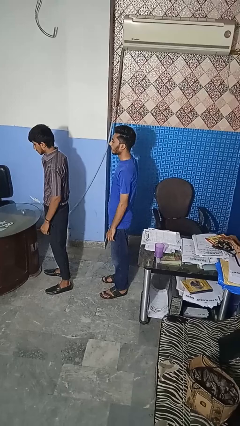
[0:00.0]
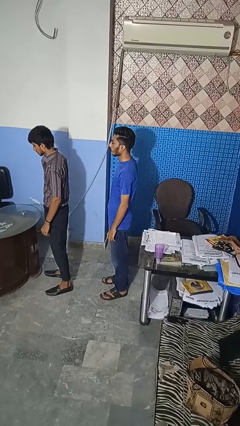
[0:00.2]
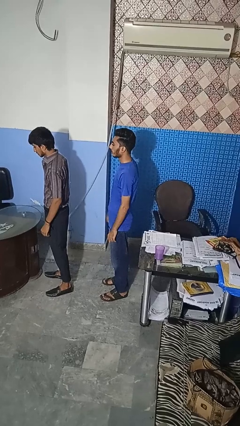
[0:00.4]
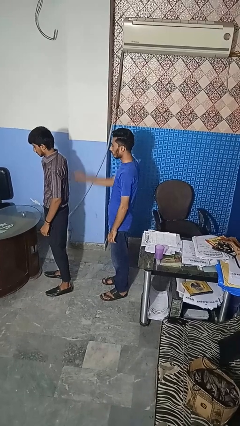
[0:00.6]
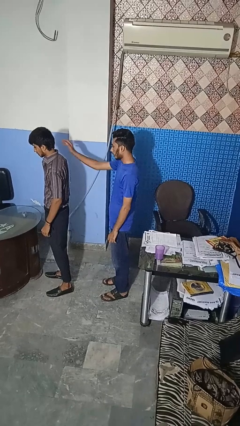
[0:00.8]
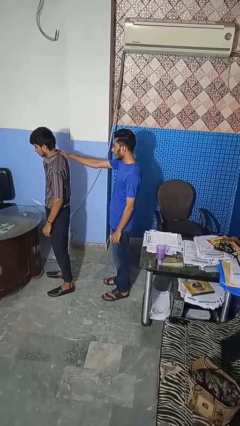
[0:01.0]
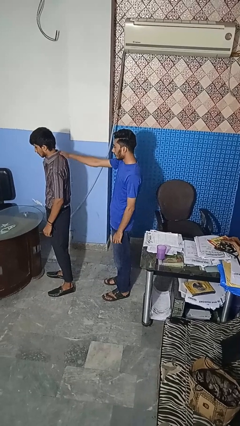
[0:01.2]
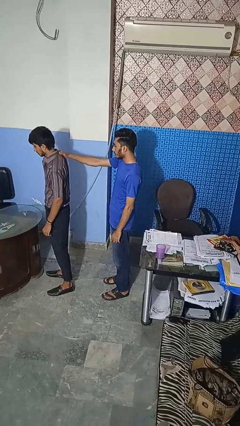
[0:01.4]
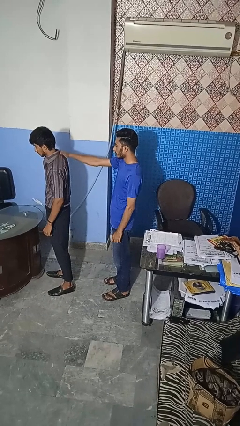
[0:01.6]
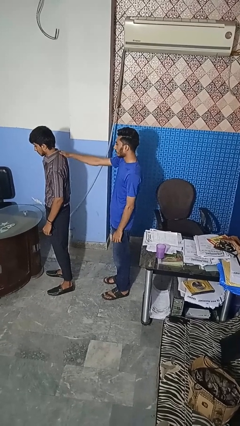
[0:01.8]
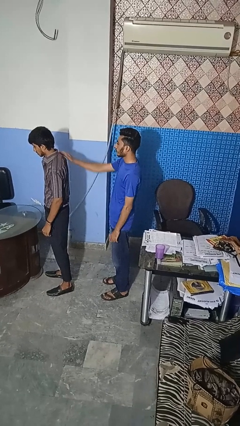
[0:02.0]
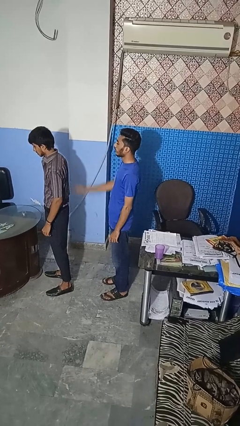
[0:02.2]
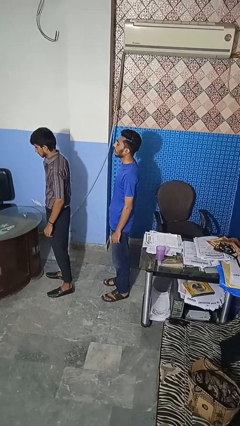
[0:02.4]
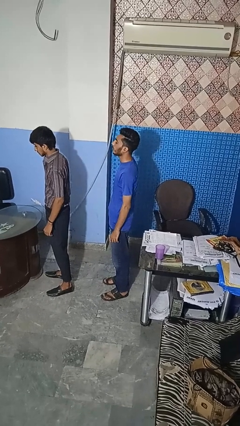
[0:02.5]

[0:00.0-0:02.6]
person touches back of person

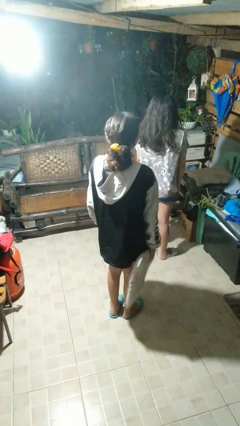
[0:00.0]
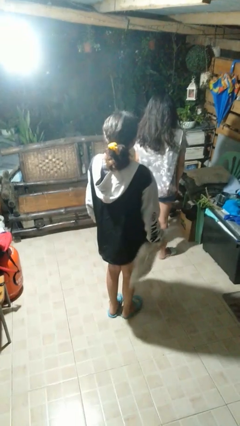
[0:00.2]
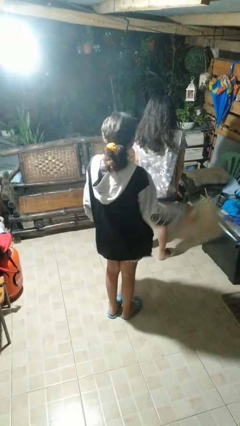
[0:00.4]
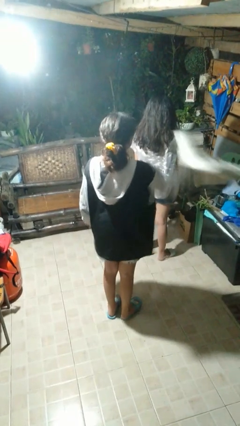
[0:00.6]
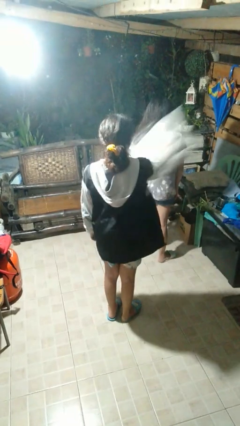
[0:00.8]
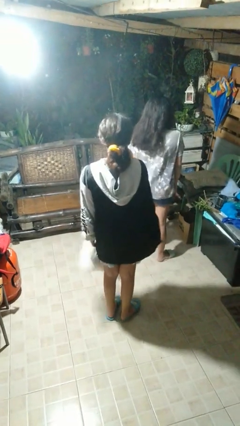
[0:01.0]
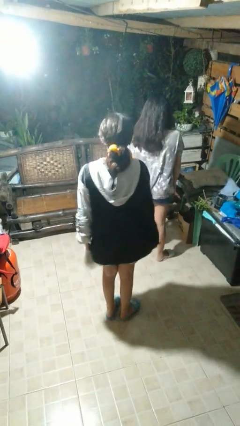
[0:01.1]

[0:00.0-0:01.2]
person hits person with pillow

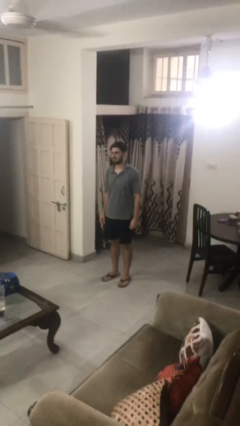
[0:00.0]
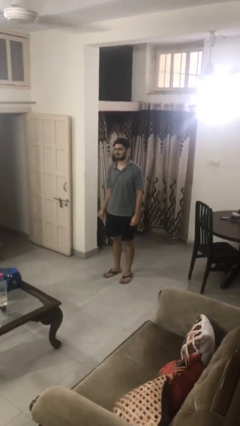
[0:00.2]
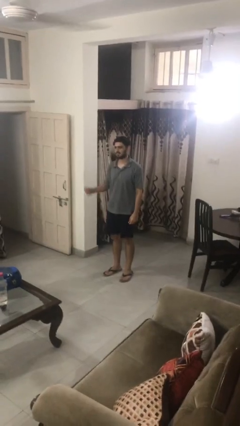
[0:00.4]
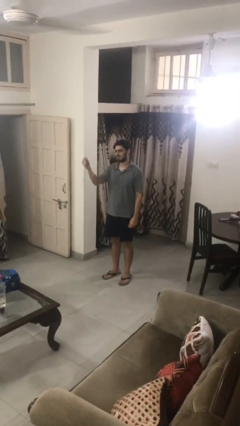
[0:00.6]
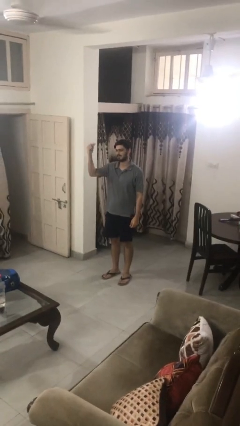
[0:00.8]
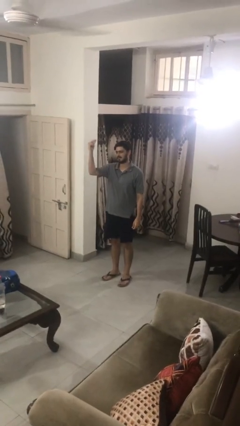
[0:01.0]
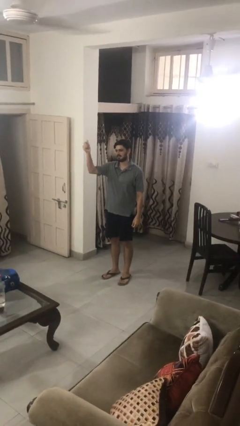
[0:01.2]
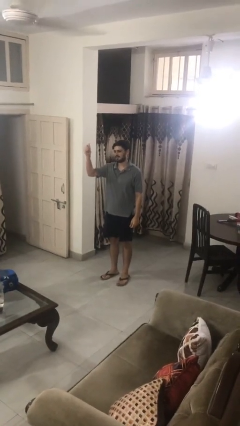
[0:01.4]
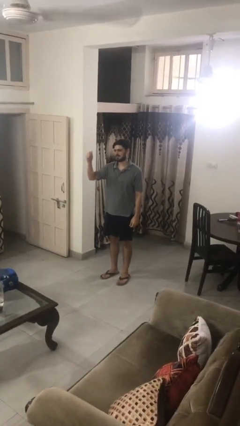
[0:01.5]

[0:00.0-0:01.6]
person snaps fingers

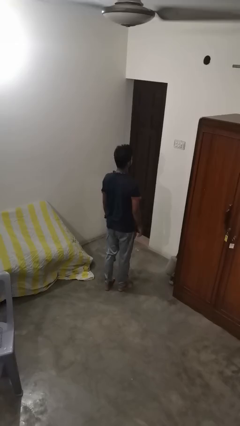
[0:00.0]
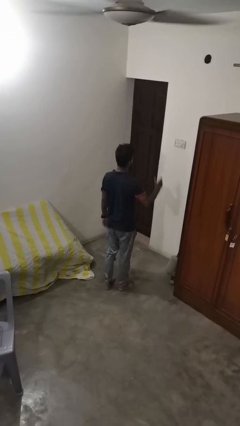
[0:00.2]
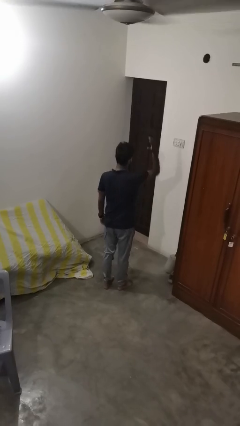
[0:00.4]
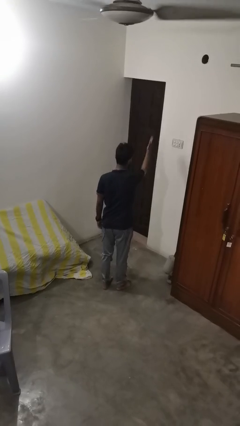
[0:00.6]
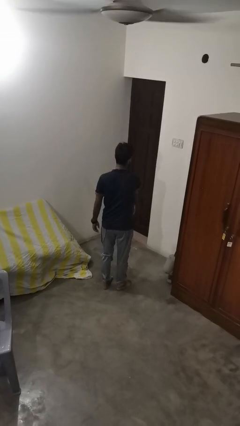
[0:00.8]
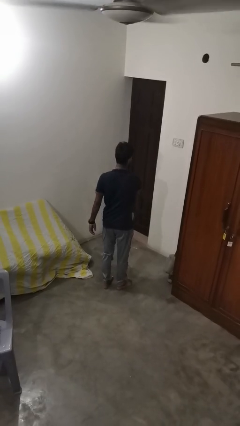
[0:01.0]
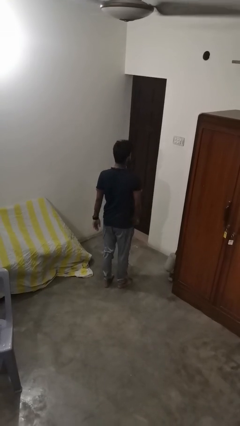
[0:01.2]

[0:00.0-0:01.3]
person karate chop

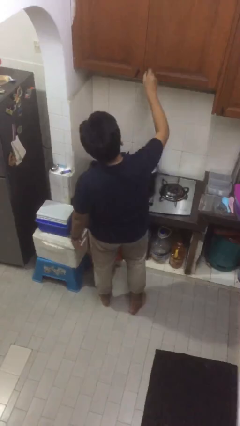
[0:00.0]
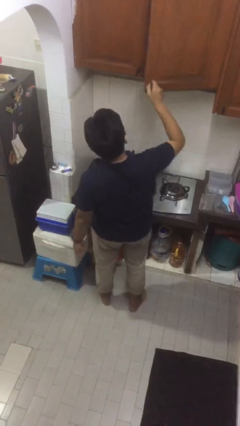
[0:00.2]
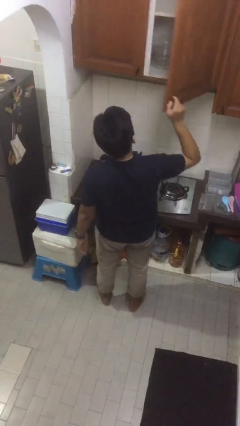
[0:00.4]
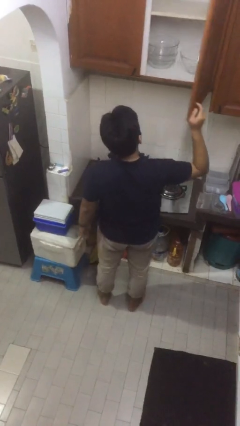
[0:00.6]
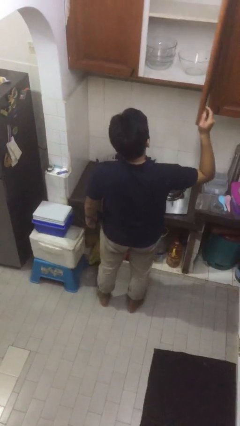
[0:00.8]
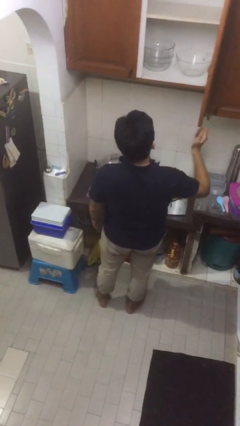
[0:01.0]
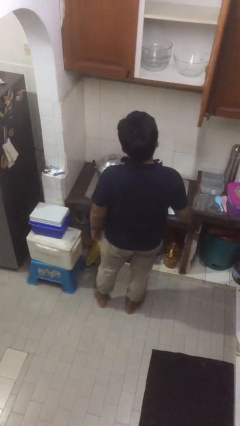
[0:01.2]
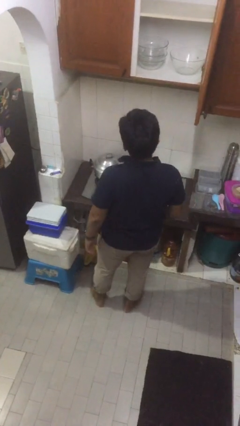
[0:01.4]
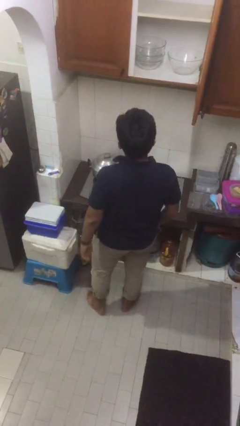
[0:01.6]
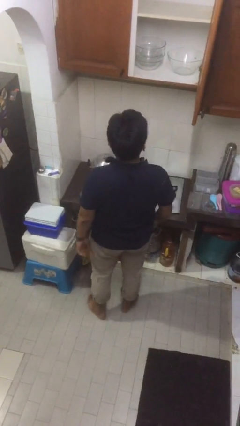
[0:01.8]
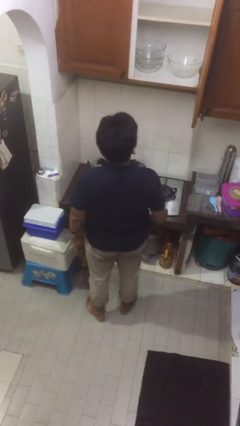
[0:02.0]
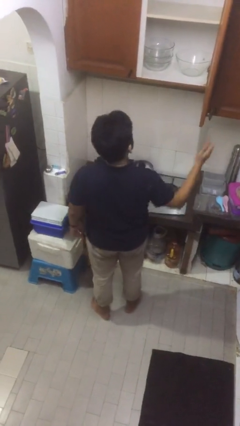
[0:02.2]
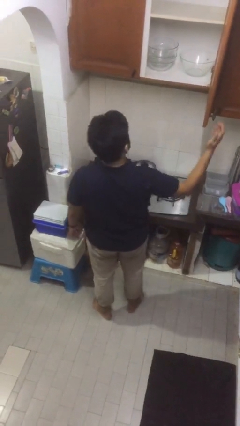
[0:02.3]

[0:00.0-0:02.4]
person opens cabinet

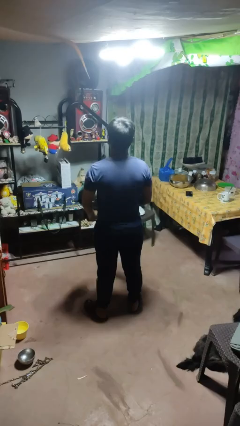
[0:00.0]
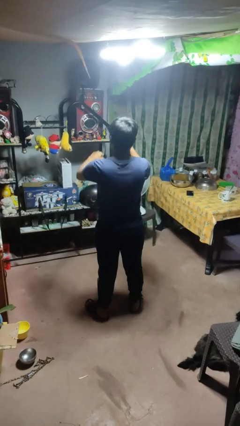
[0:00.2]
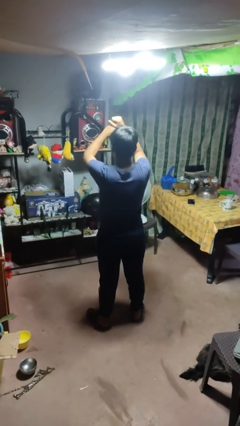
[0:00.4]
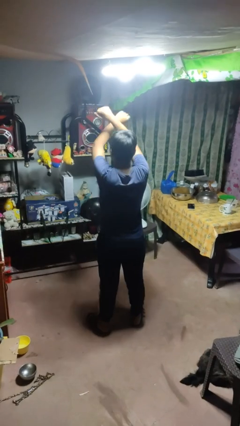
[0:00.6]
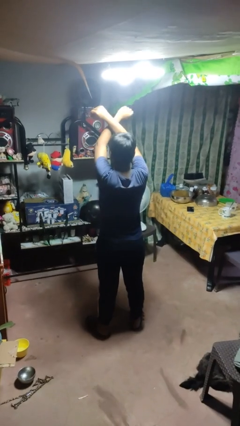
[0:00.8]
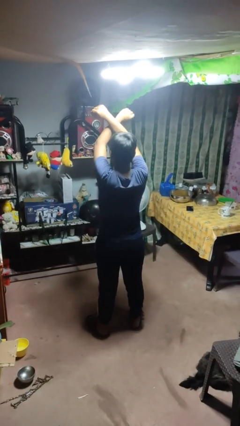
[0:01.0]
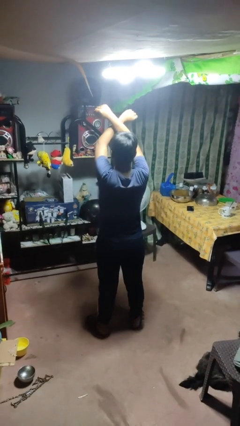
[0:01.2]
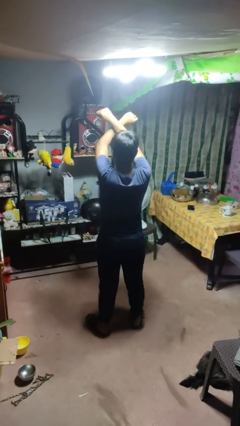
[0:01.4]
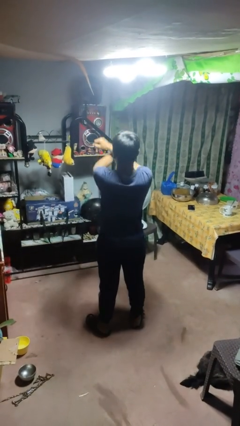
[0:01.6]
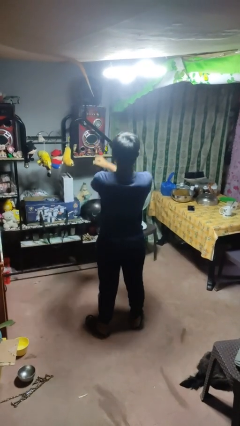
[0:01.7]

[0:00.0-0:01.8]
person gestures arms x

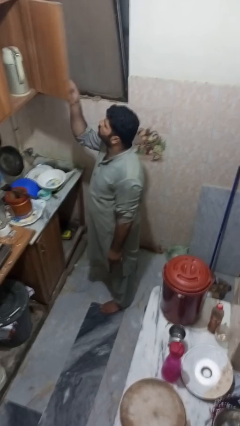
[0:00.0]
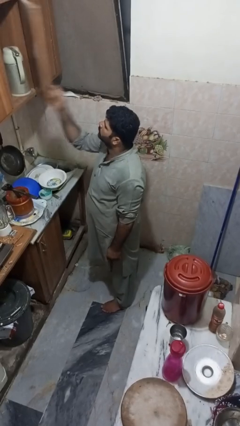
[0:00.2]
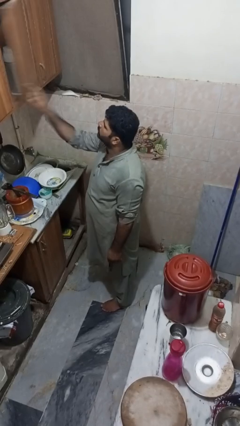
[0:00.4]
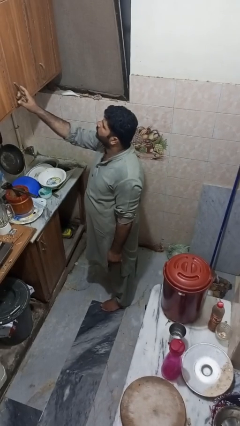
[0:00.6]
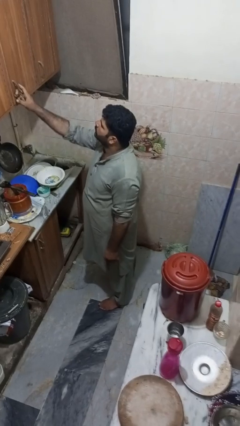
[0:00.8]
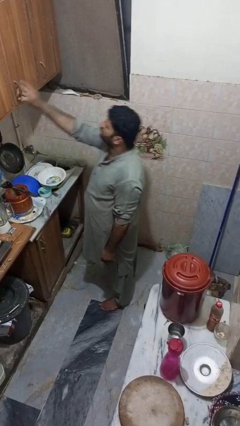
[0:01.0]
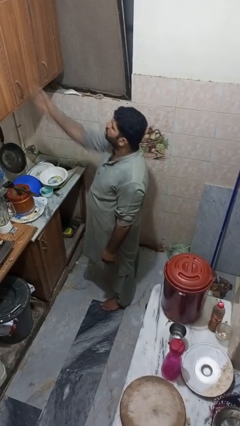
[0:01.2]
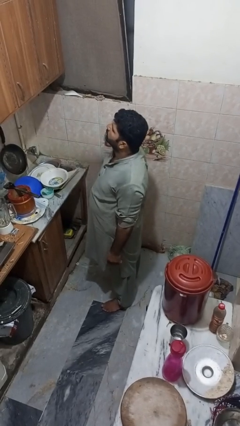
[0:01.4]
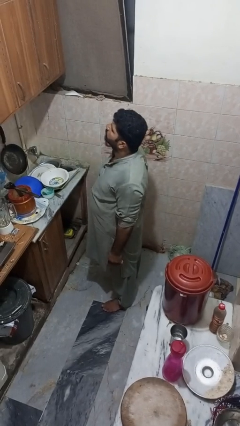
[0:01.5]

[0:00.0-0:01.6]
person closes cabinet

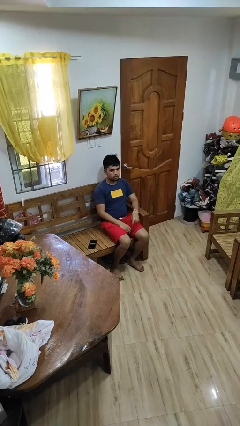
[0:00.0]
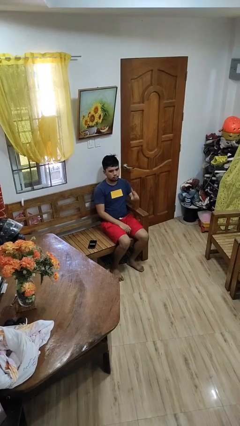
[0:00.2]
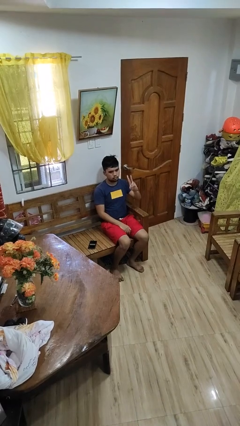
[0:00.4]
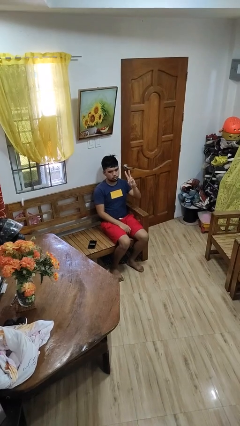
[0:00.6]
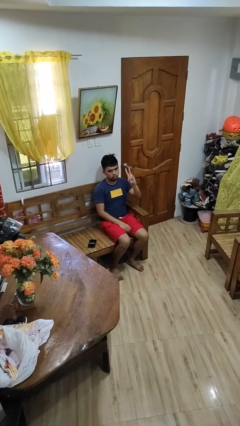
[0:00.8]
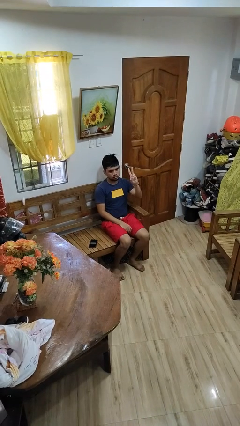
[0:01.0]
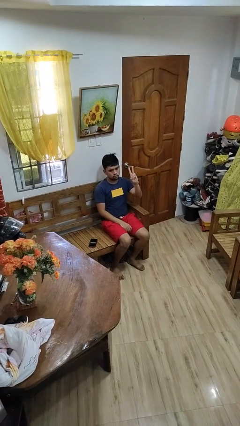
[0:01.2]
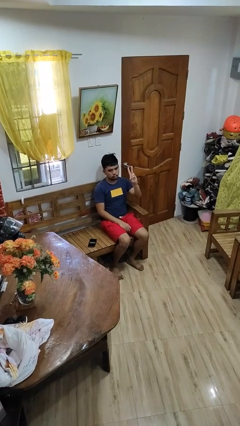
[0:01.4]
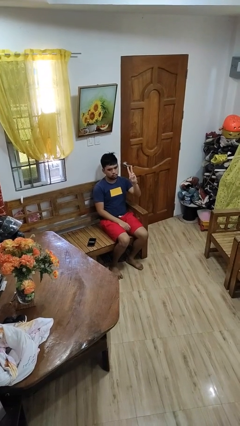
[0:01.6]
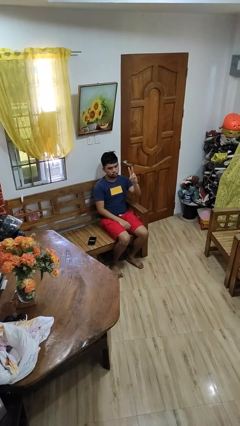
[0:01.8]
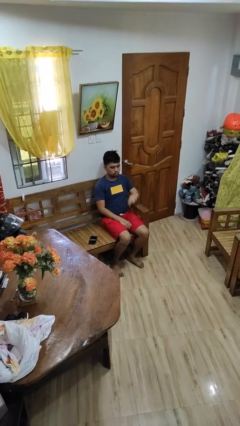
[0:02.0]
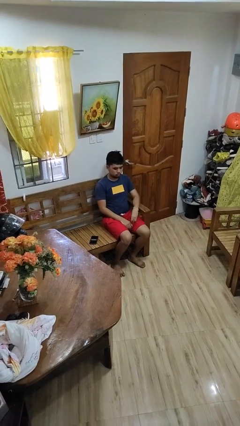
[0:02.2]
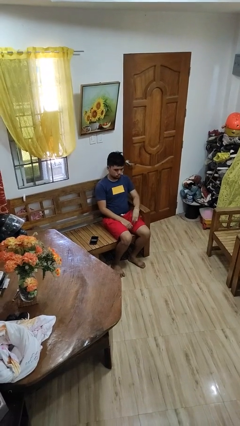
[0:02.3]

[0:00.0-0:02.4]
person gestures peace

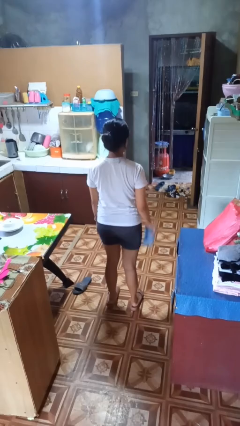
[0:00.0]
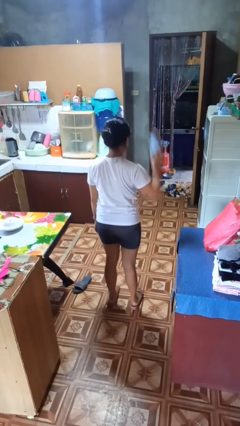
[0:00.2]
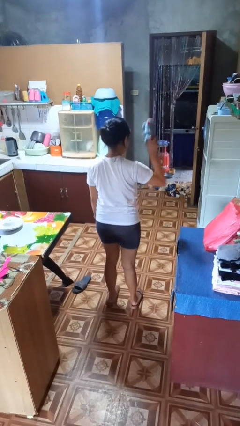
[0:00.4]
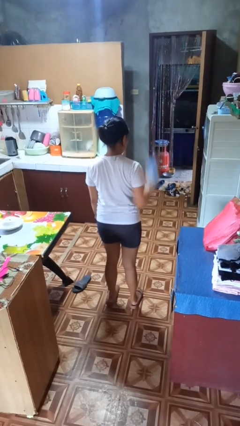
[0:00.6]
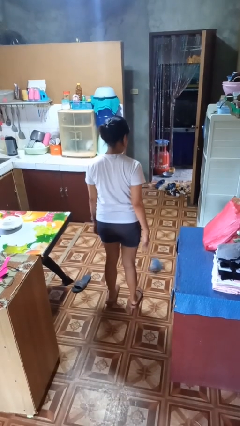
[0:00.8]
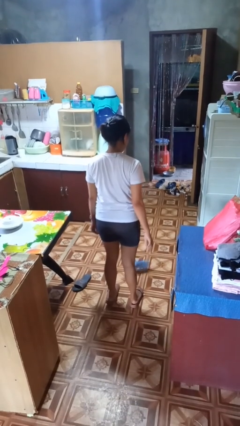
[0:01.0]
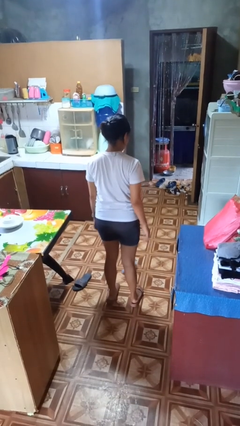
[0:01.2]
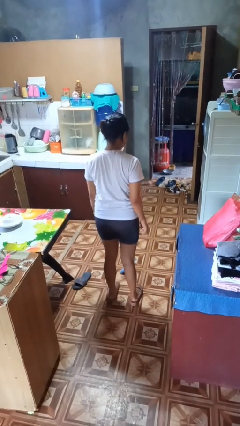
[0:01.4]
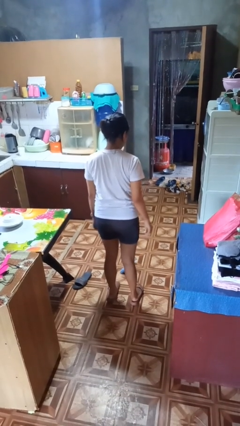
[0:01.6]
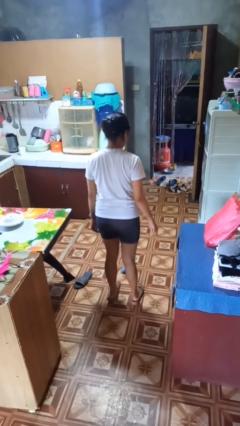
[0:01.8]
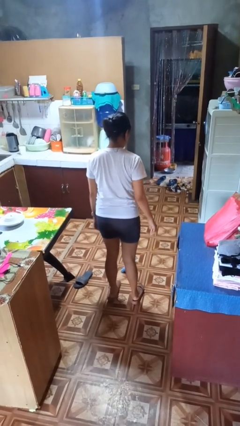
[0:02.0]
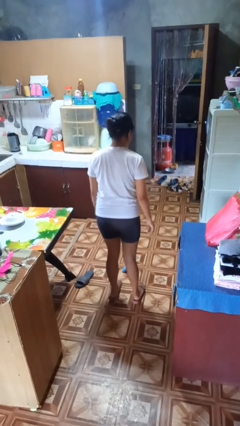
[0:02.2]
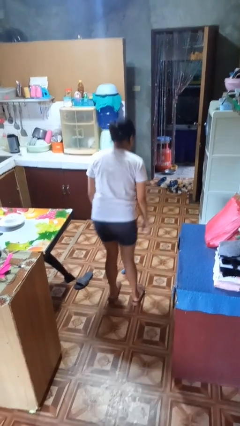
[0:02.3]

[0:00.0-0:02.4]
person throws object to ground
